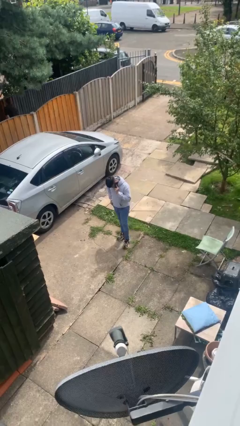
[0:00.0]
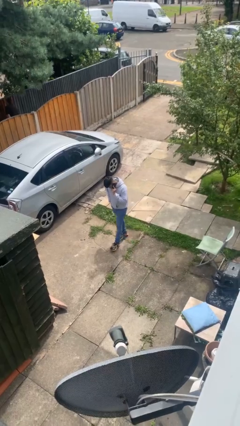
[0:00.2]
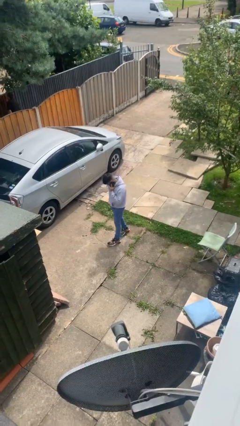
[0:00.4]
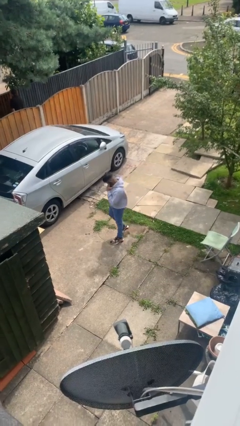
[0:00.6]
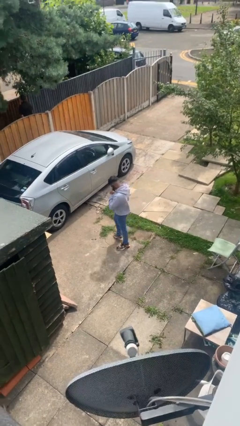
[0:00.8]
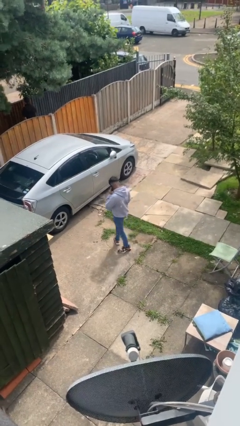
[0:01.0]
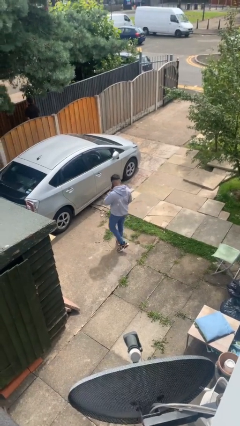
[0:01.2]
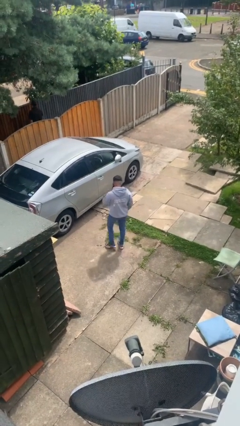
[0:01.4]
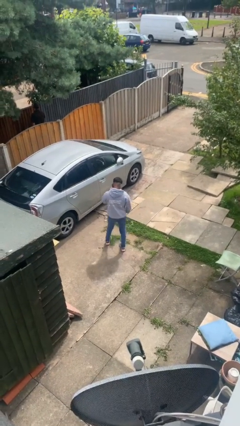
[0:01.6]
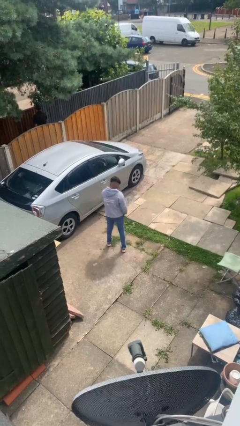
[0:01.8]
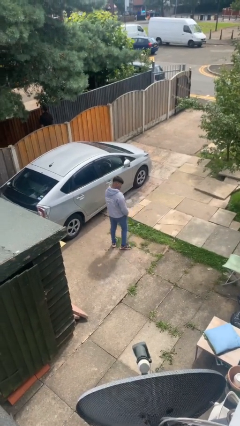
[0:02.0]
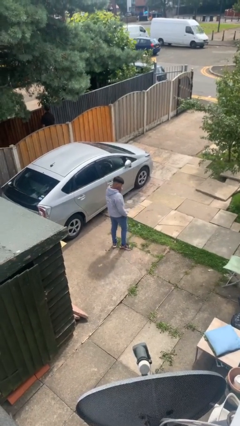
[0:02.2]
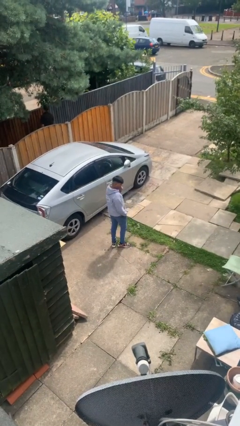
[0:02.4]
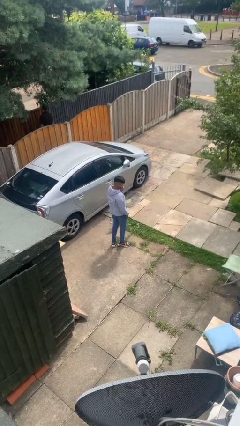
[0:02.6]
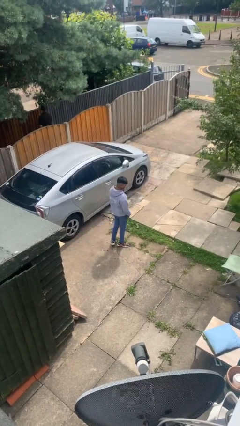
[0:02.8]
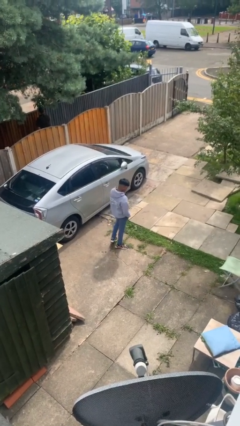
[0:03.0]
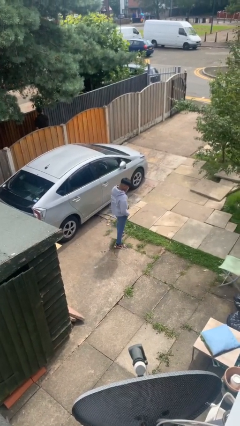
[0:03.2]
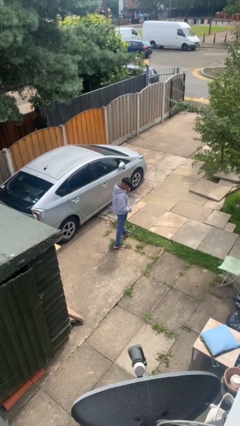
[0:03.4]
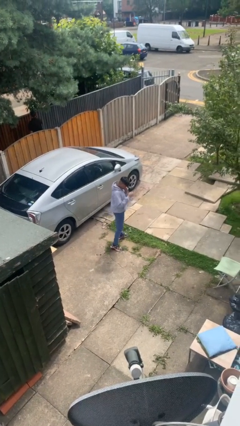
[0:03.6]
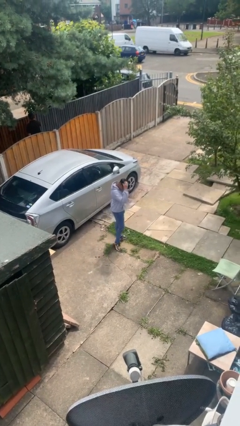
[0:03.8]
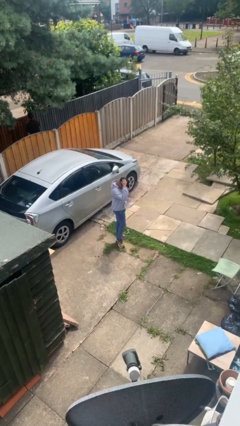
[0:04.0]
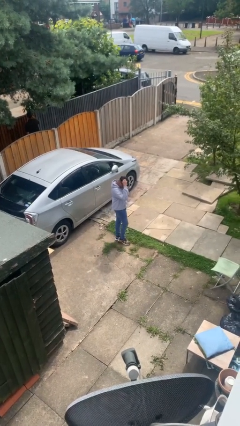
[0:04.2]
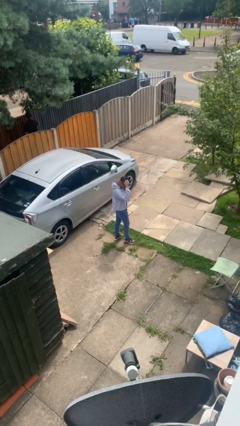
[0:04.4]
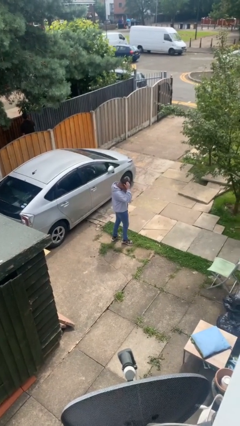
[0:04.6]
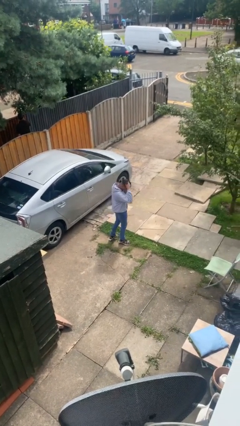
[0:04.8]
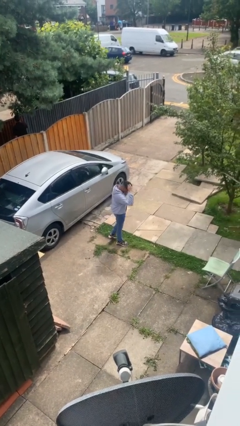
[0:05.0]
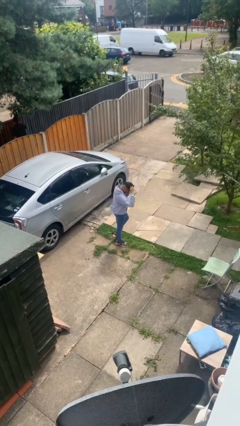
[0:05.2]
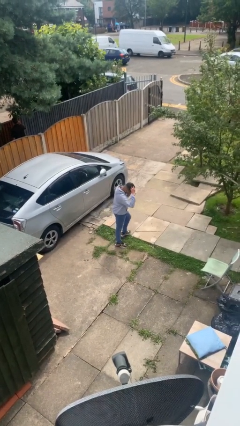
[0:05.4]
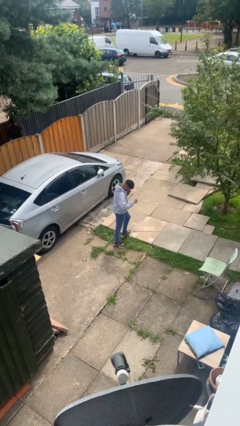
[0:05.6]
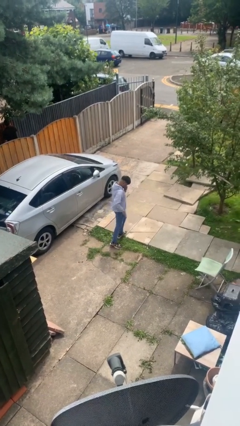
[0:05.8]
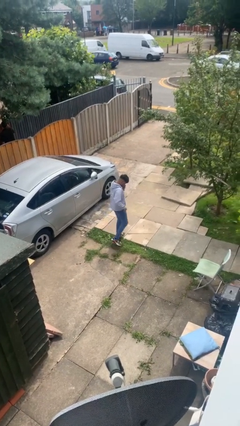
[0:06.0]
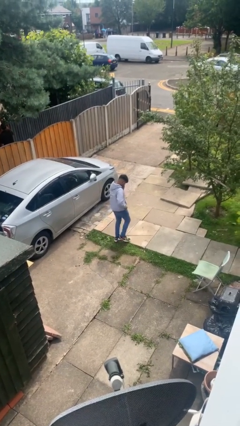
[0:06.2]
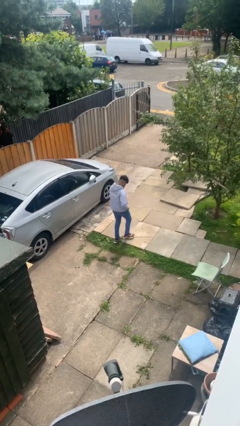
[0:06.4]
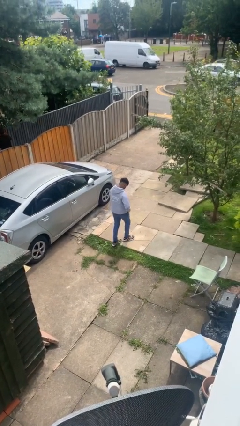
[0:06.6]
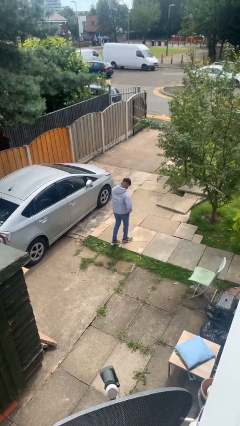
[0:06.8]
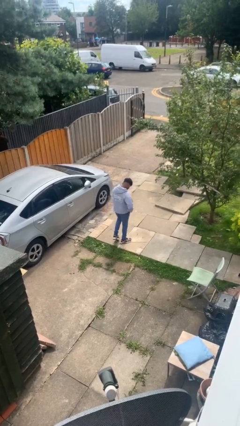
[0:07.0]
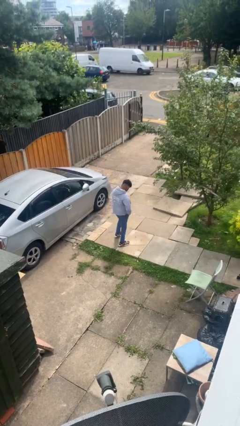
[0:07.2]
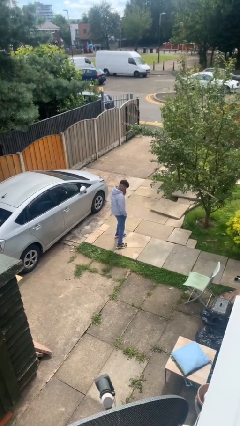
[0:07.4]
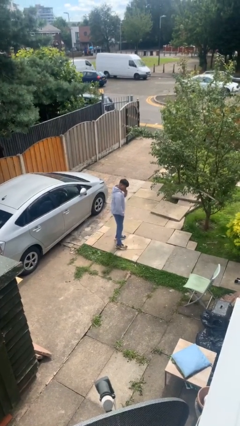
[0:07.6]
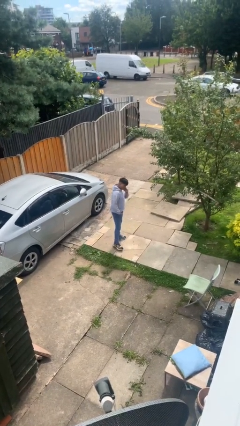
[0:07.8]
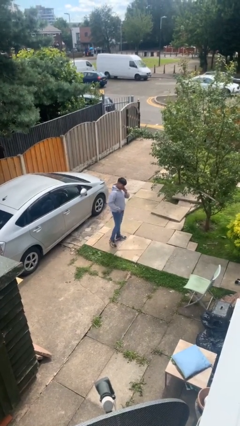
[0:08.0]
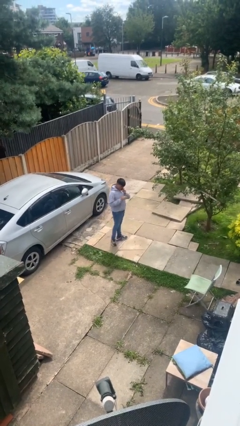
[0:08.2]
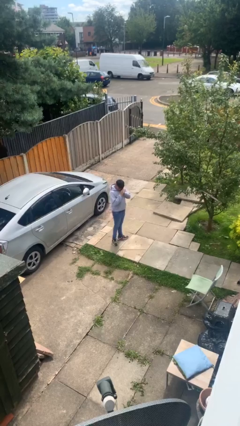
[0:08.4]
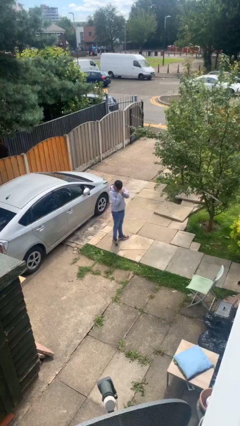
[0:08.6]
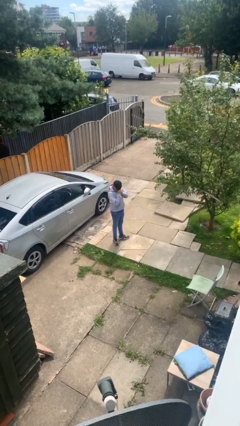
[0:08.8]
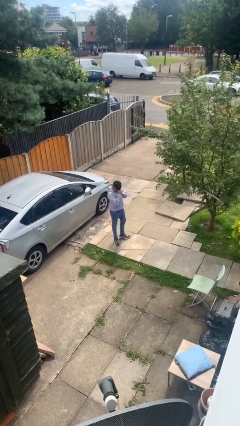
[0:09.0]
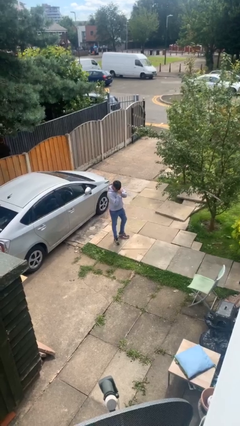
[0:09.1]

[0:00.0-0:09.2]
person talks on phone

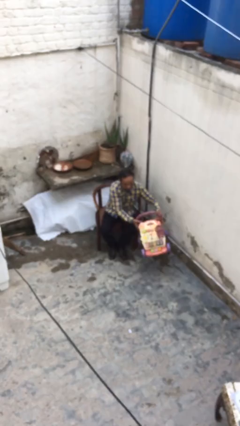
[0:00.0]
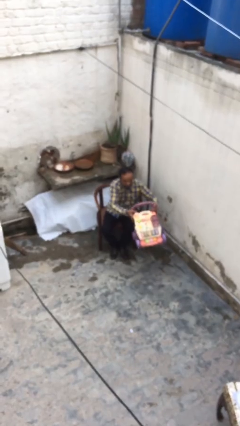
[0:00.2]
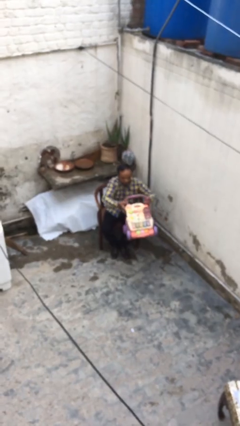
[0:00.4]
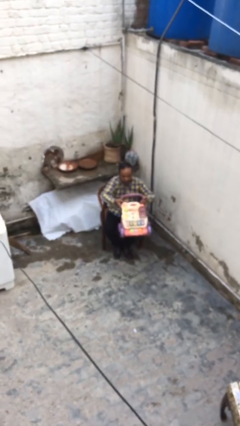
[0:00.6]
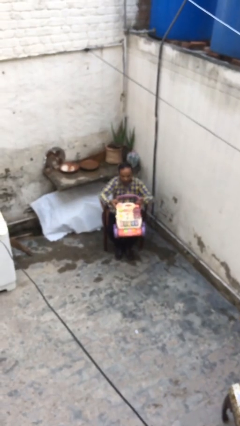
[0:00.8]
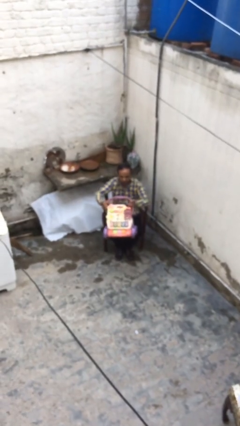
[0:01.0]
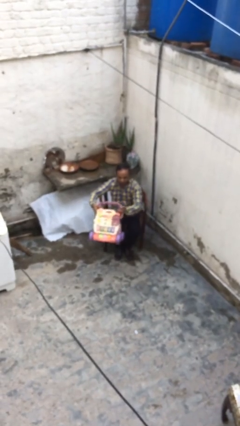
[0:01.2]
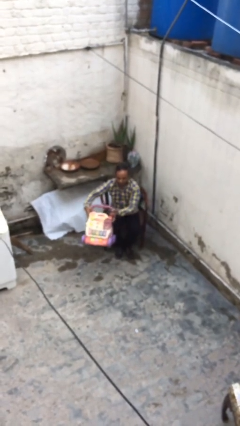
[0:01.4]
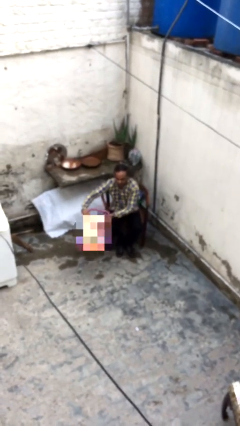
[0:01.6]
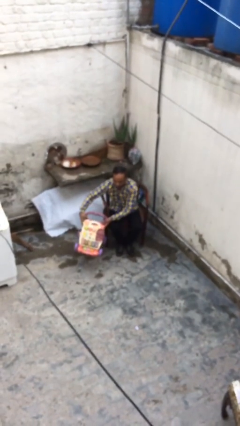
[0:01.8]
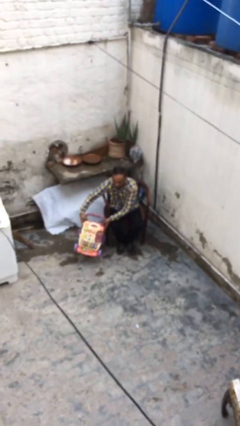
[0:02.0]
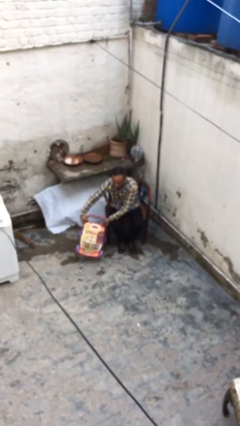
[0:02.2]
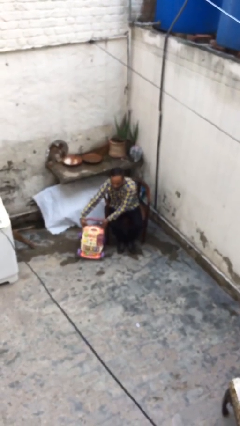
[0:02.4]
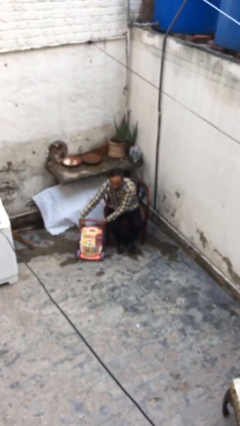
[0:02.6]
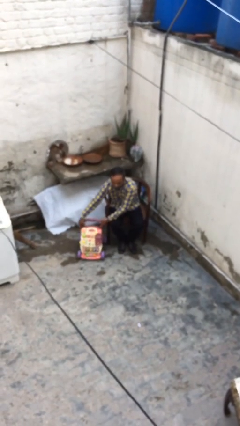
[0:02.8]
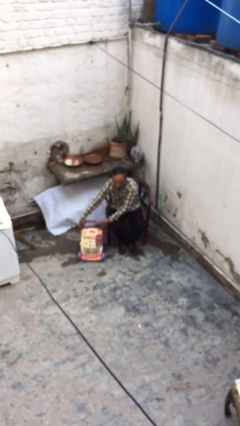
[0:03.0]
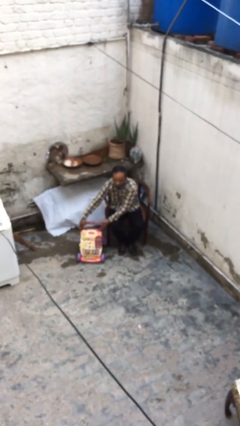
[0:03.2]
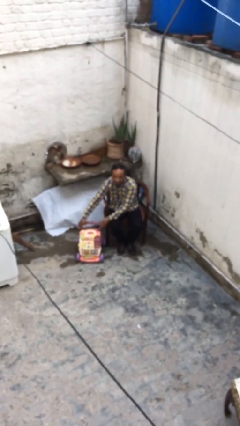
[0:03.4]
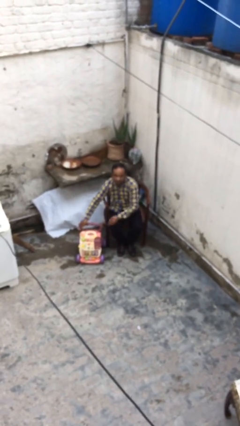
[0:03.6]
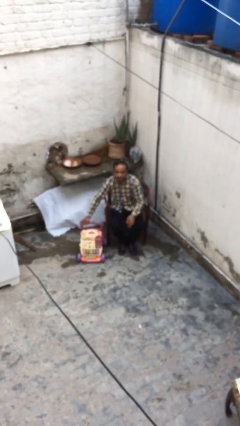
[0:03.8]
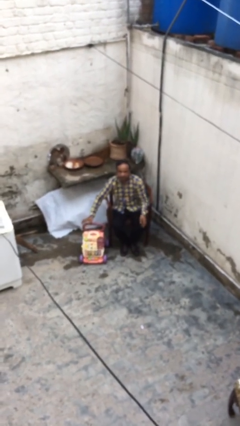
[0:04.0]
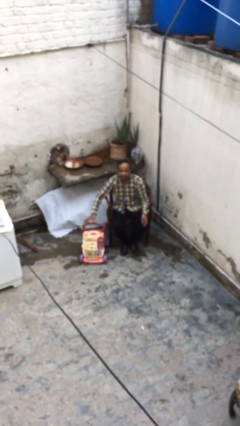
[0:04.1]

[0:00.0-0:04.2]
person puts down object on floor

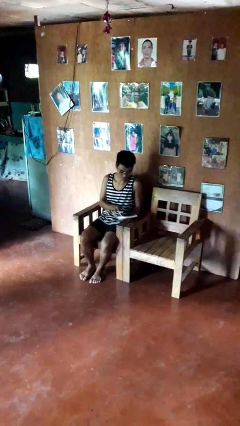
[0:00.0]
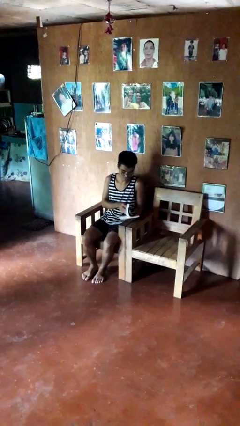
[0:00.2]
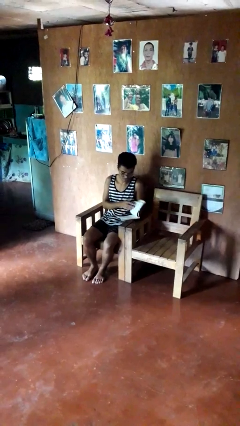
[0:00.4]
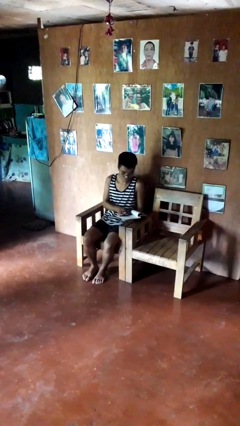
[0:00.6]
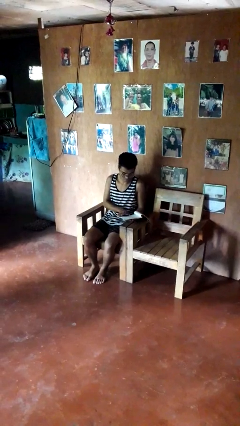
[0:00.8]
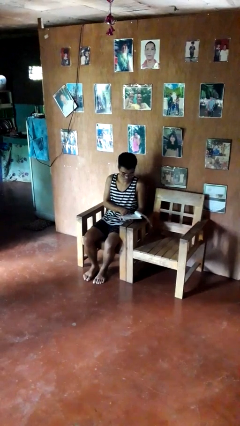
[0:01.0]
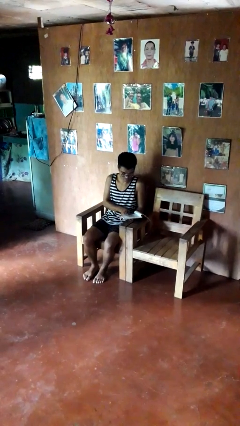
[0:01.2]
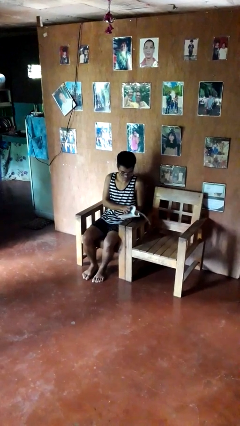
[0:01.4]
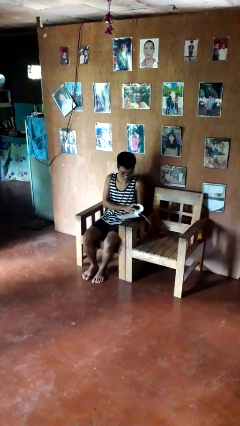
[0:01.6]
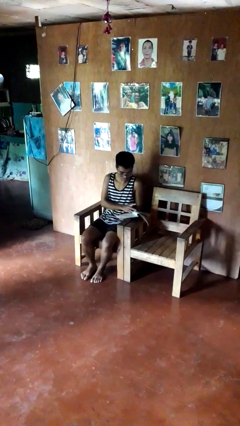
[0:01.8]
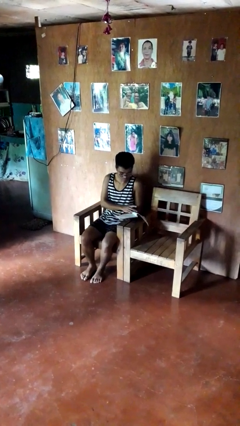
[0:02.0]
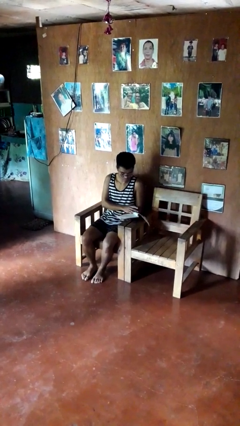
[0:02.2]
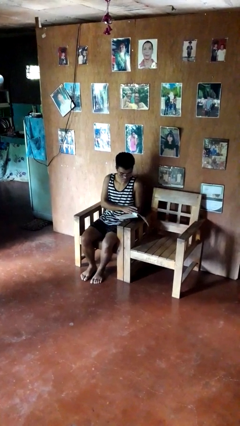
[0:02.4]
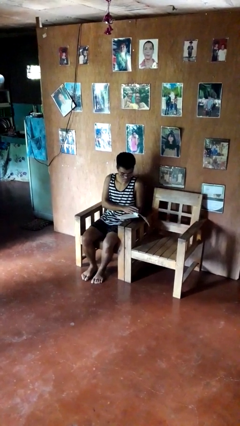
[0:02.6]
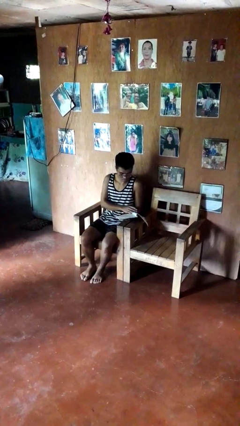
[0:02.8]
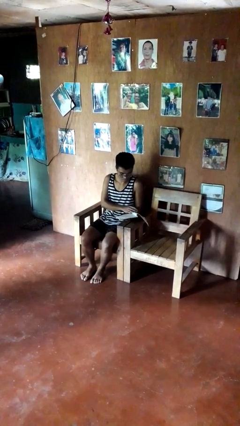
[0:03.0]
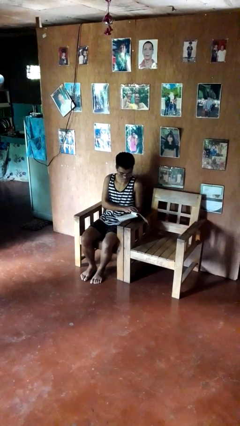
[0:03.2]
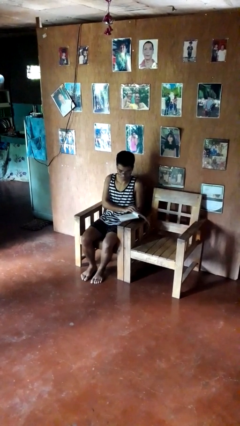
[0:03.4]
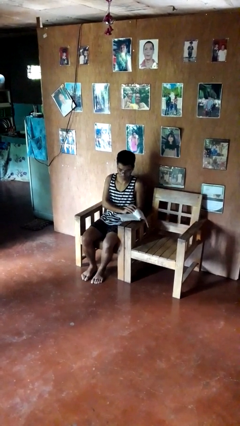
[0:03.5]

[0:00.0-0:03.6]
person reads book

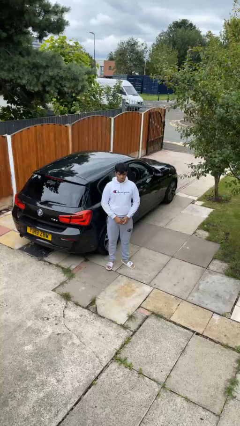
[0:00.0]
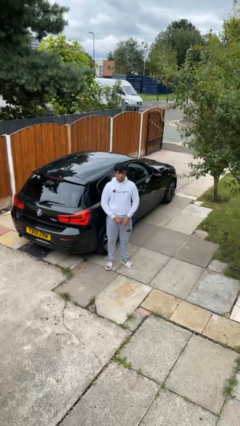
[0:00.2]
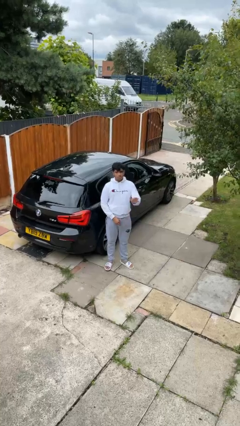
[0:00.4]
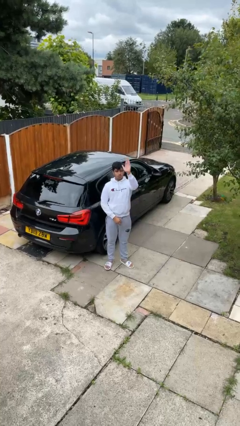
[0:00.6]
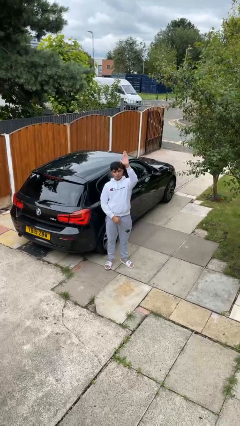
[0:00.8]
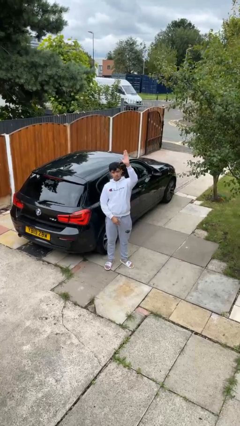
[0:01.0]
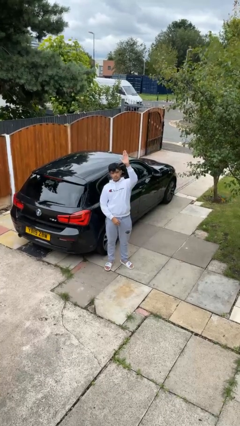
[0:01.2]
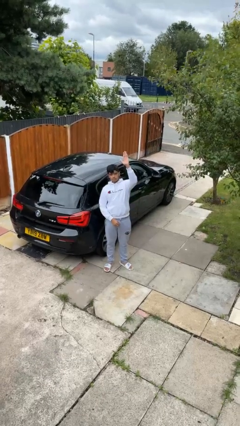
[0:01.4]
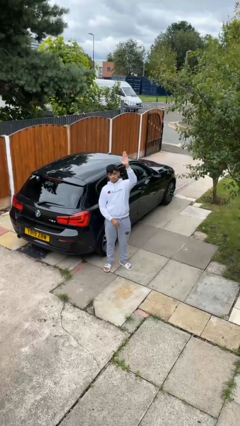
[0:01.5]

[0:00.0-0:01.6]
person gestures raise hand
